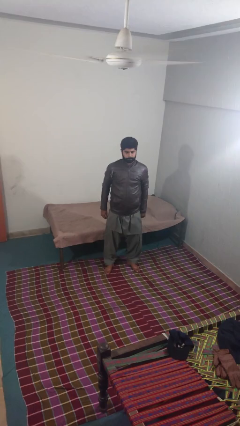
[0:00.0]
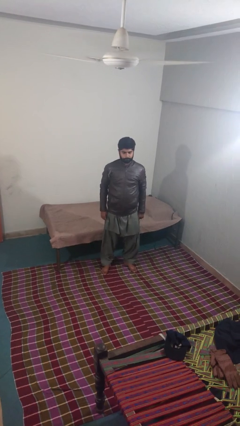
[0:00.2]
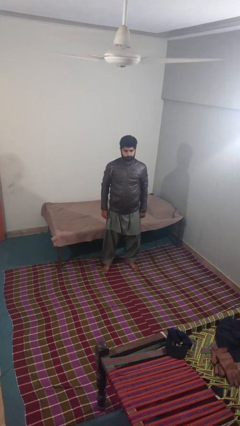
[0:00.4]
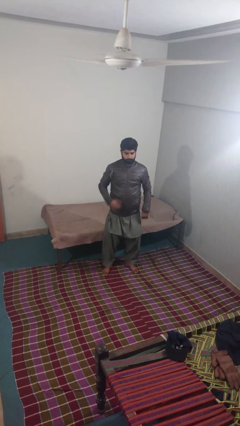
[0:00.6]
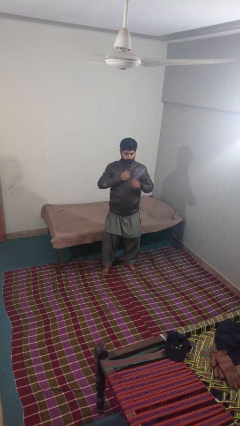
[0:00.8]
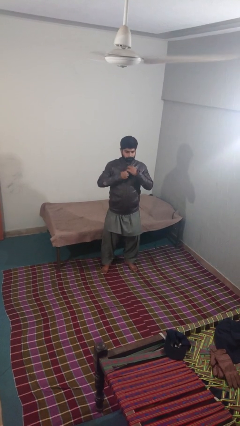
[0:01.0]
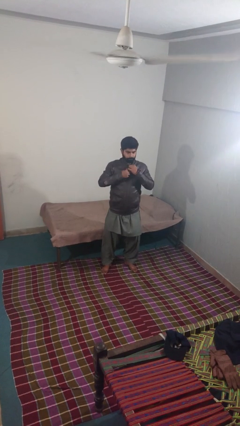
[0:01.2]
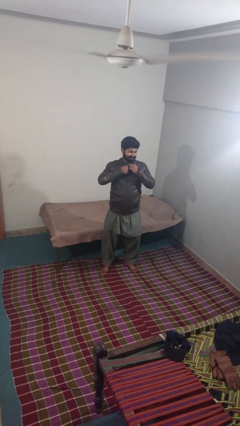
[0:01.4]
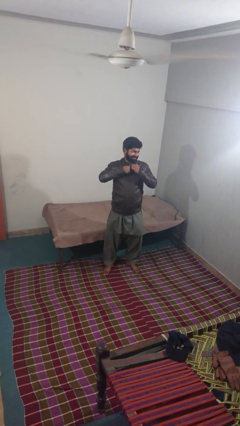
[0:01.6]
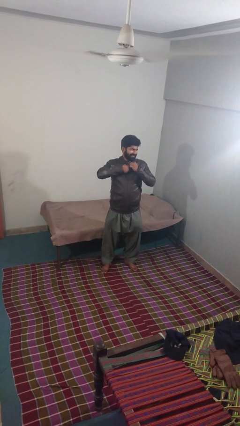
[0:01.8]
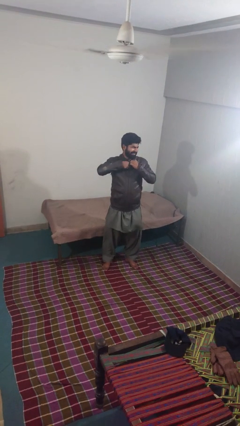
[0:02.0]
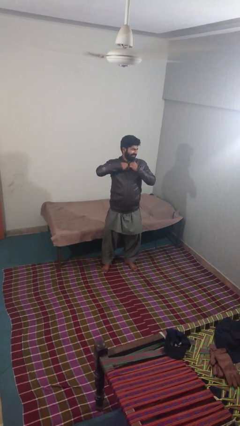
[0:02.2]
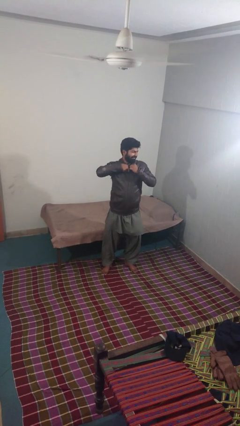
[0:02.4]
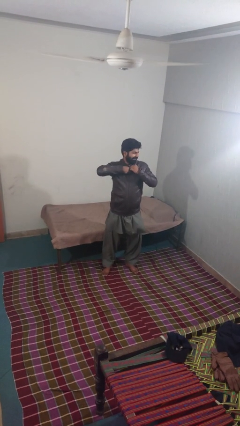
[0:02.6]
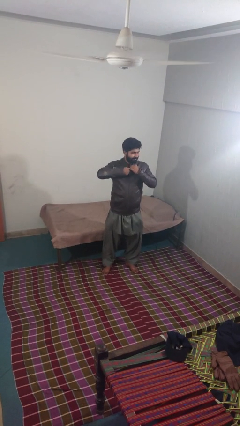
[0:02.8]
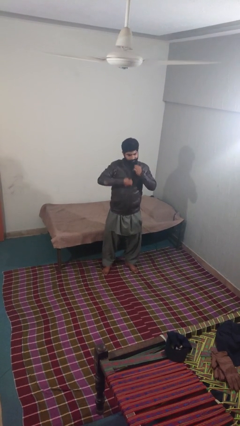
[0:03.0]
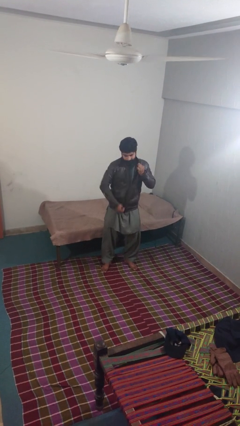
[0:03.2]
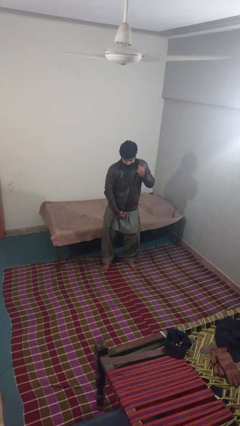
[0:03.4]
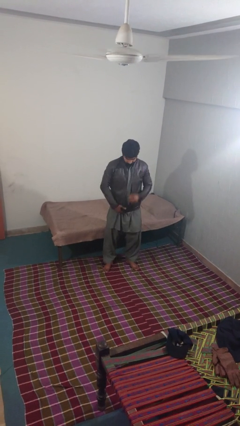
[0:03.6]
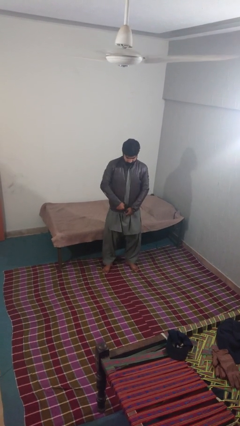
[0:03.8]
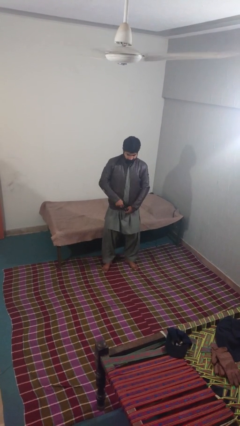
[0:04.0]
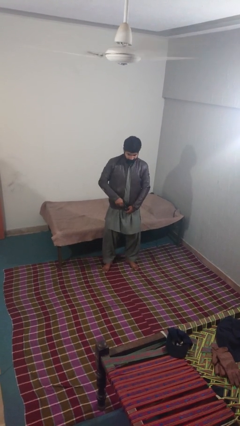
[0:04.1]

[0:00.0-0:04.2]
person unzips jacket

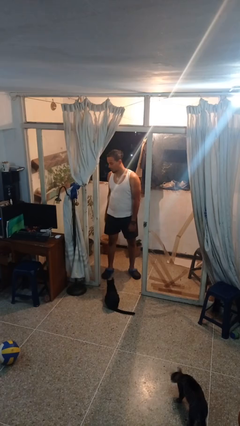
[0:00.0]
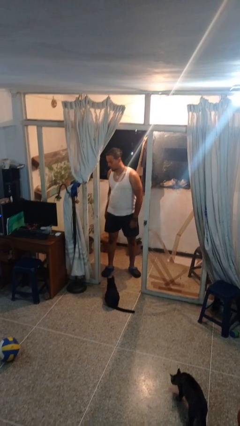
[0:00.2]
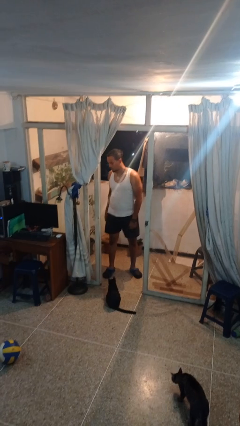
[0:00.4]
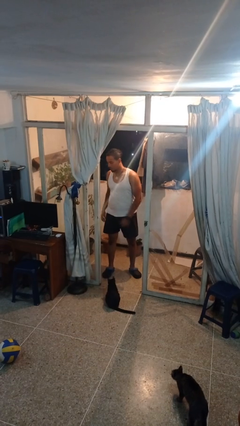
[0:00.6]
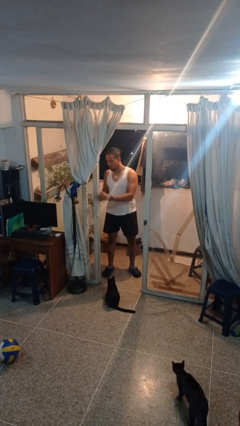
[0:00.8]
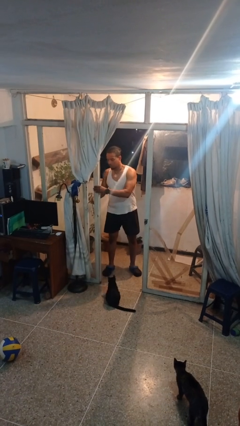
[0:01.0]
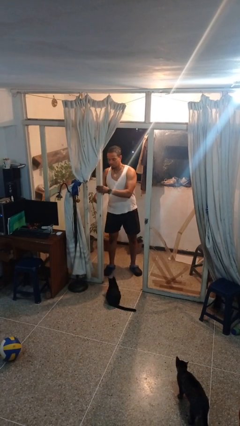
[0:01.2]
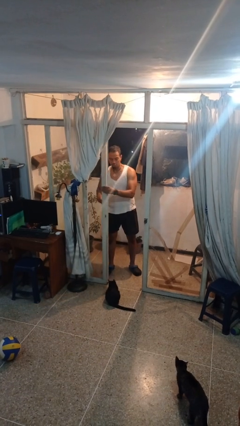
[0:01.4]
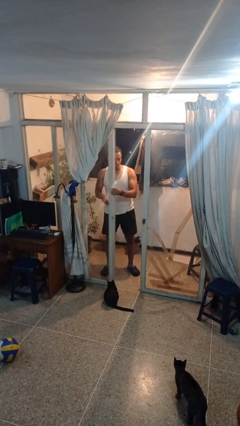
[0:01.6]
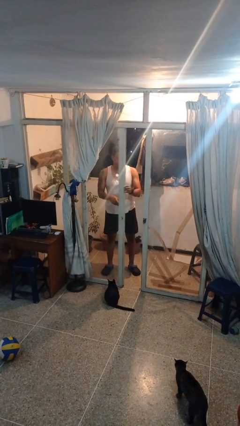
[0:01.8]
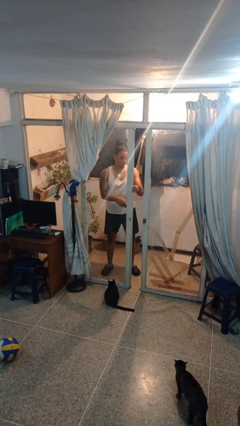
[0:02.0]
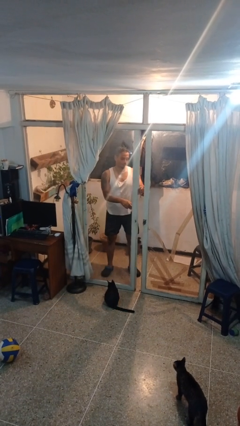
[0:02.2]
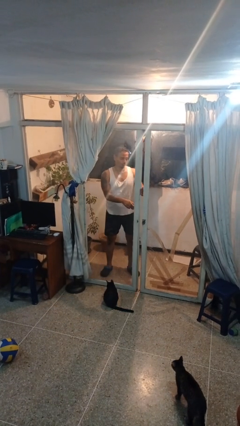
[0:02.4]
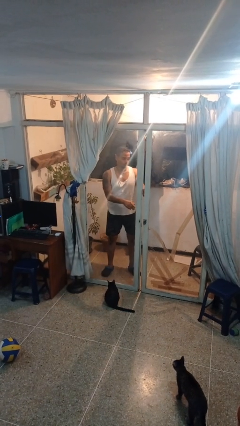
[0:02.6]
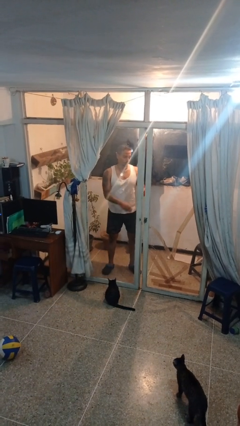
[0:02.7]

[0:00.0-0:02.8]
person closes sliding door

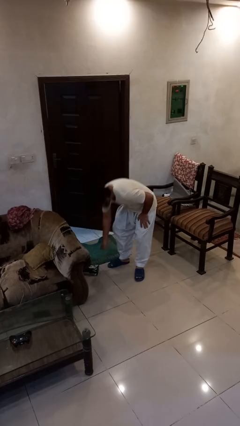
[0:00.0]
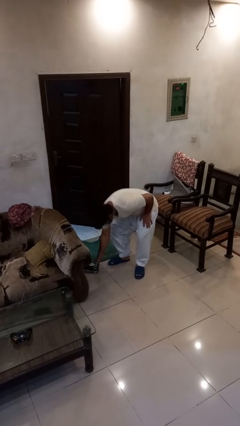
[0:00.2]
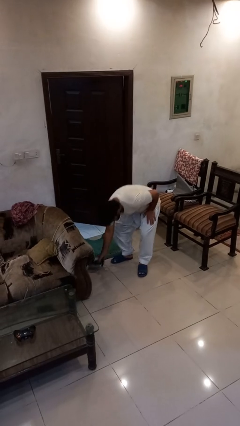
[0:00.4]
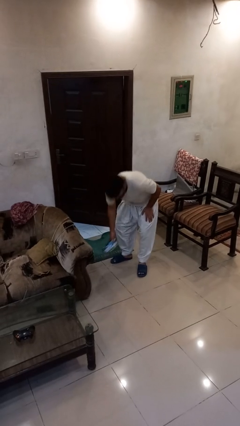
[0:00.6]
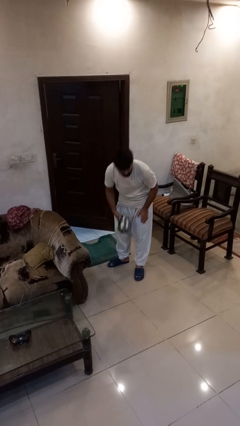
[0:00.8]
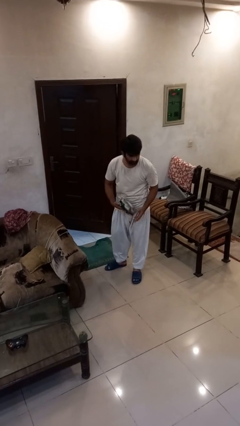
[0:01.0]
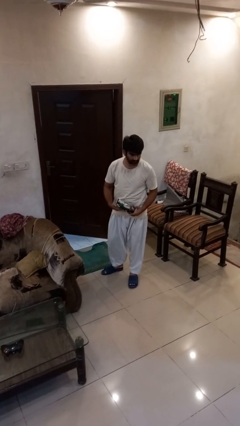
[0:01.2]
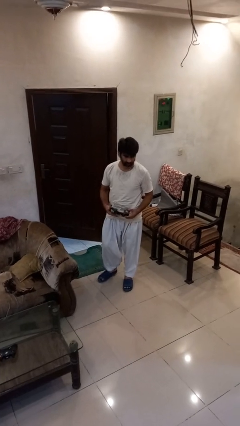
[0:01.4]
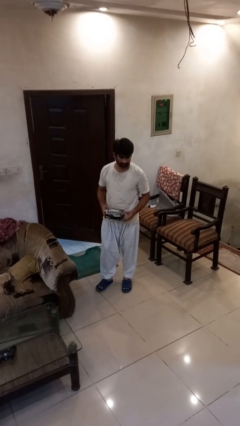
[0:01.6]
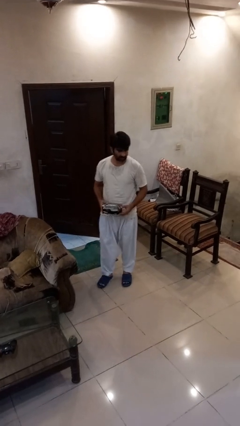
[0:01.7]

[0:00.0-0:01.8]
person picks up object from floor

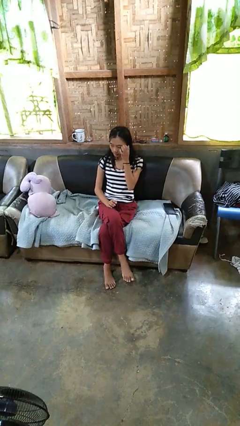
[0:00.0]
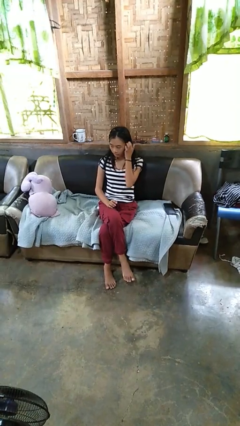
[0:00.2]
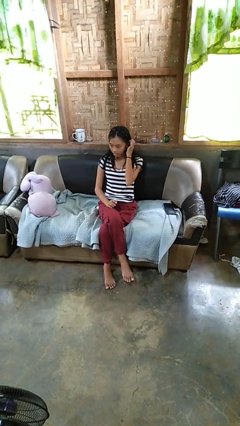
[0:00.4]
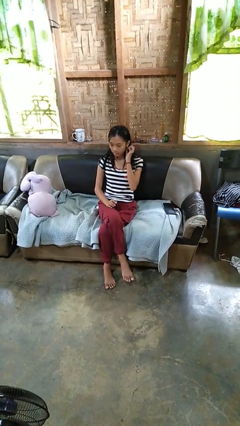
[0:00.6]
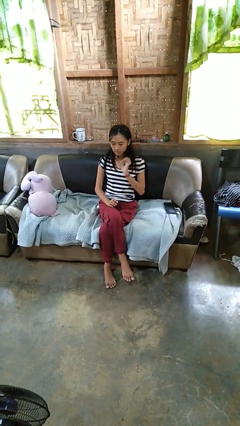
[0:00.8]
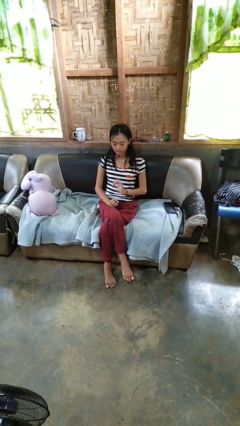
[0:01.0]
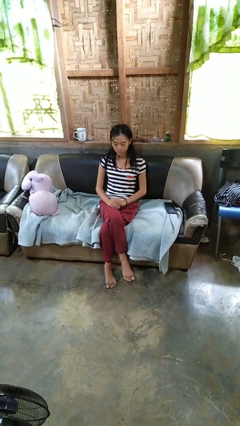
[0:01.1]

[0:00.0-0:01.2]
person strokes hair

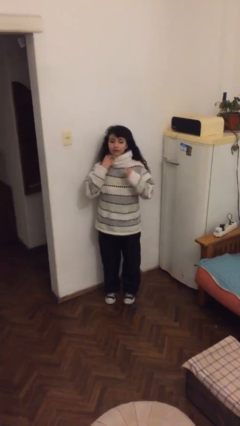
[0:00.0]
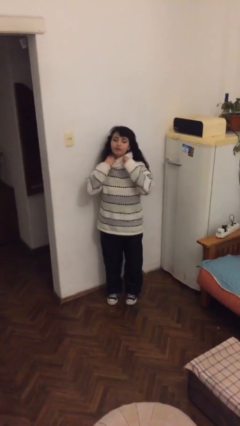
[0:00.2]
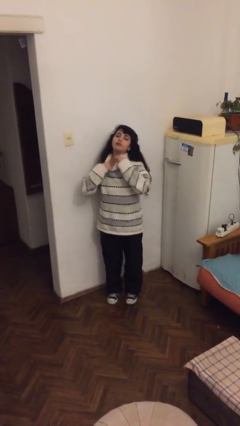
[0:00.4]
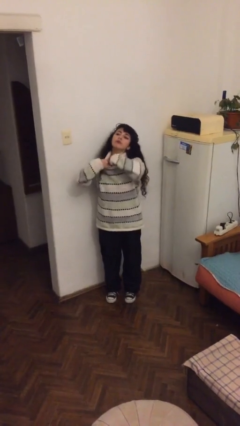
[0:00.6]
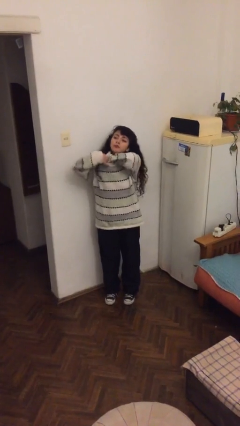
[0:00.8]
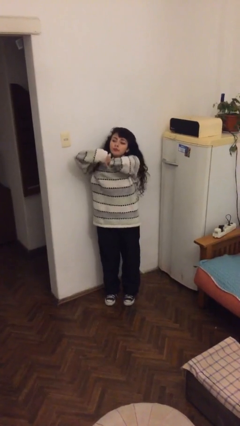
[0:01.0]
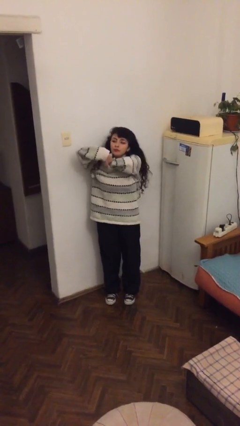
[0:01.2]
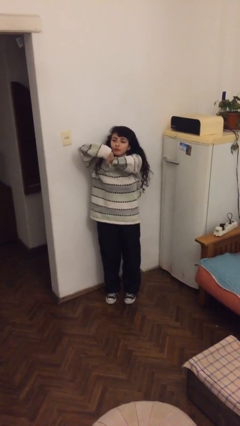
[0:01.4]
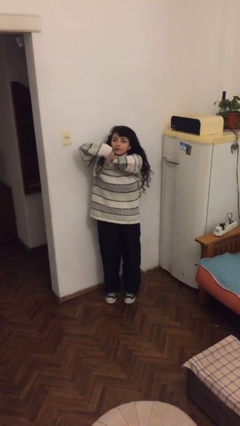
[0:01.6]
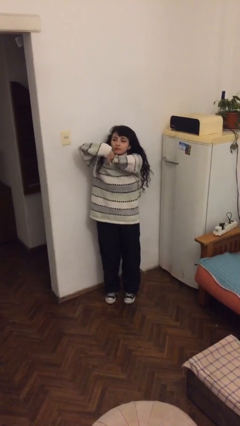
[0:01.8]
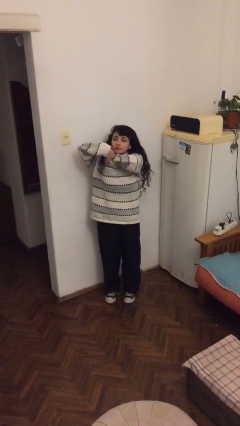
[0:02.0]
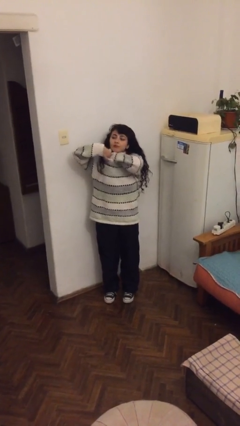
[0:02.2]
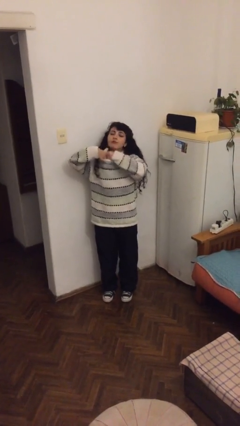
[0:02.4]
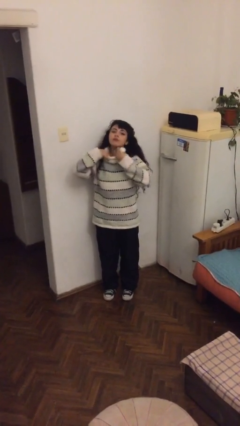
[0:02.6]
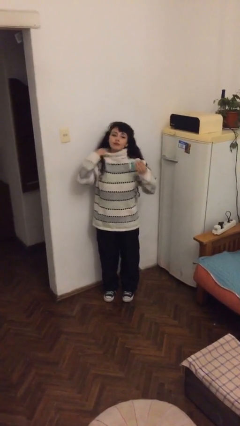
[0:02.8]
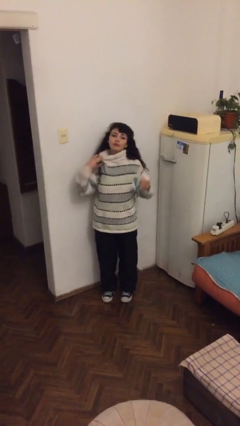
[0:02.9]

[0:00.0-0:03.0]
person applies deodorant

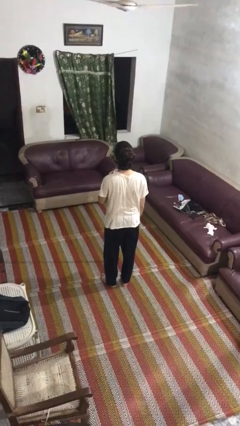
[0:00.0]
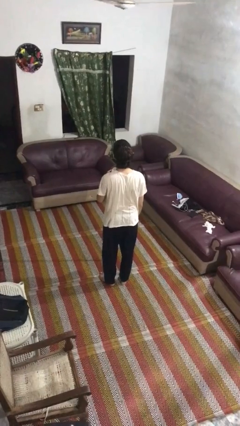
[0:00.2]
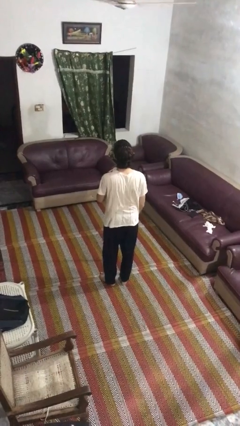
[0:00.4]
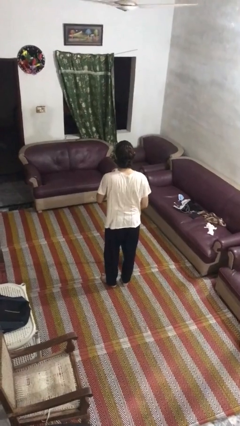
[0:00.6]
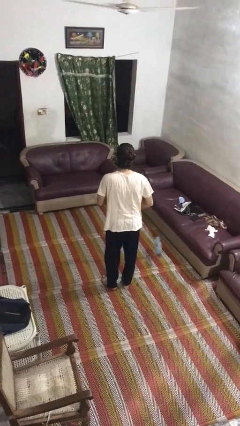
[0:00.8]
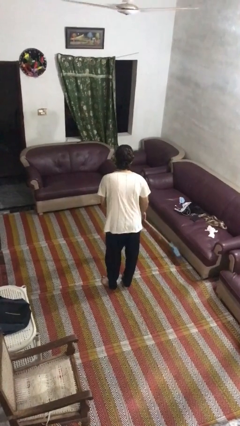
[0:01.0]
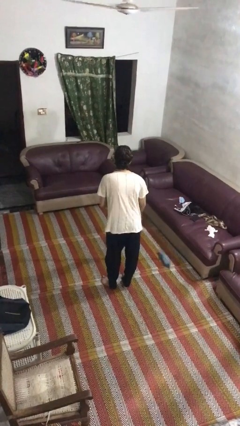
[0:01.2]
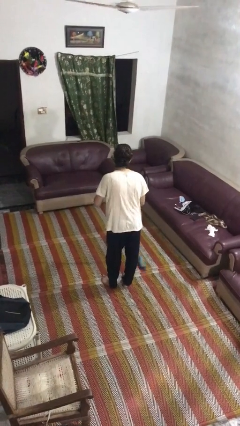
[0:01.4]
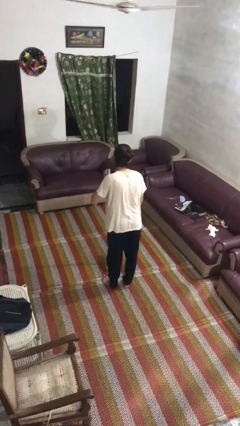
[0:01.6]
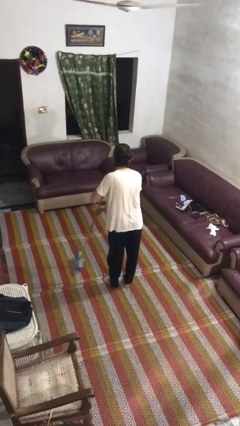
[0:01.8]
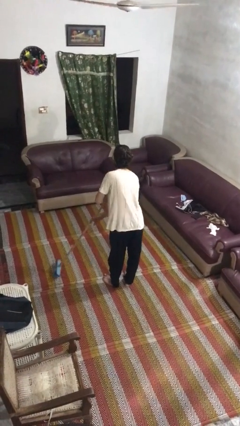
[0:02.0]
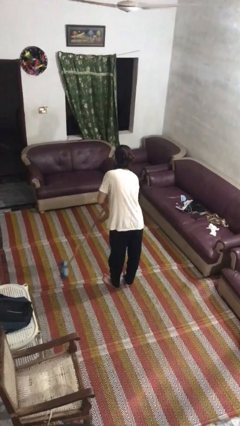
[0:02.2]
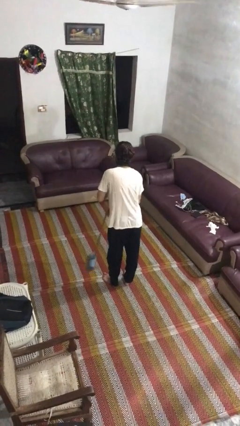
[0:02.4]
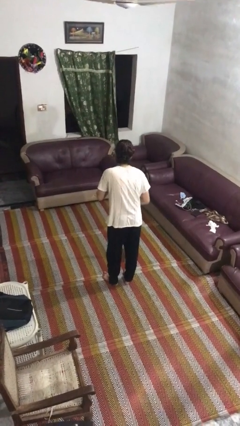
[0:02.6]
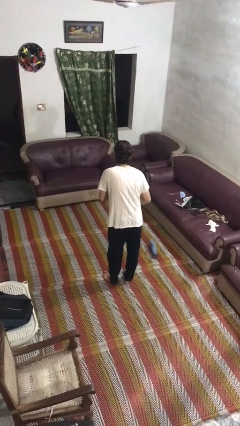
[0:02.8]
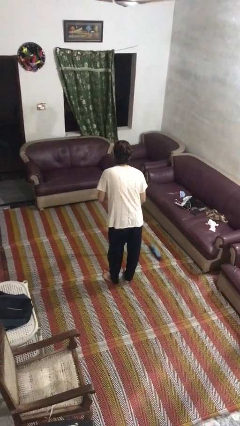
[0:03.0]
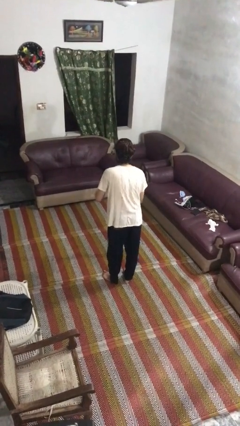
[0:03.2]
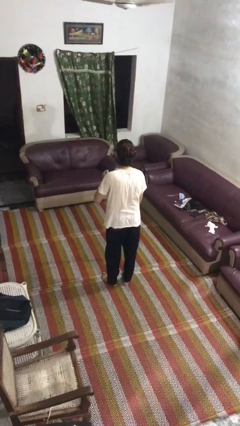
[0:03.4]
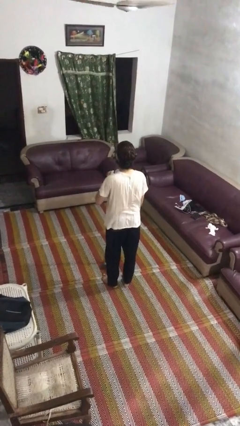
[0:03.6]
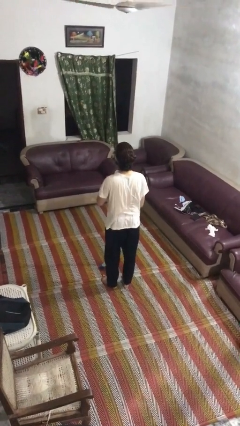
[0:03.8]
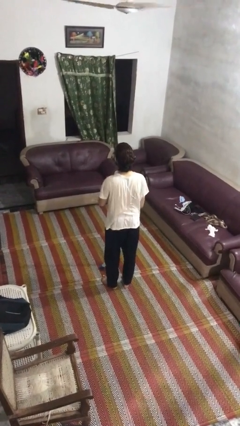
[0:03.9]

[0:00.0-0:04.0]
person sweeps floor

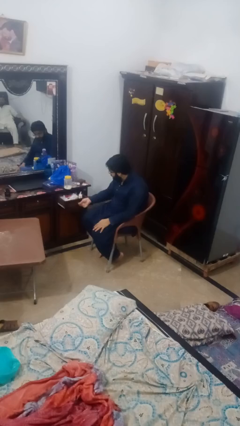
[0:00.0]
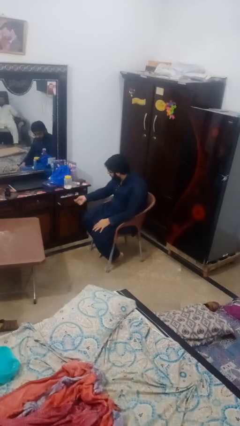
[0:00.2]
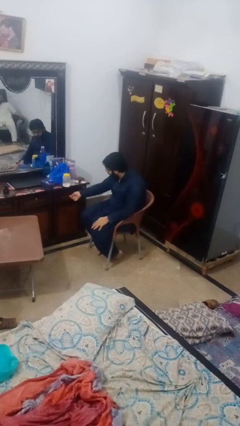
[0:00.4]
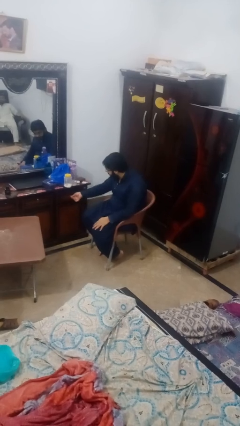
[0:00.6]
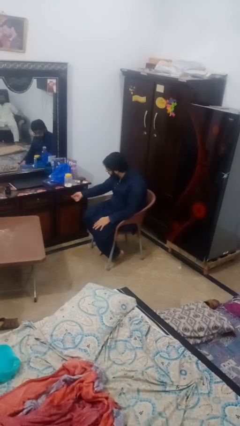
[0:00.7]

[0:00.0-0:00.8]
person closes dresser drawer
